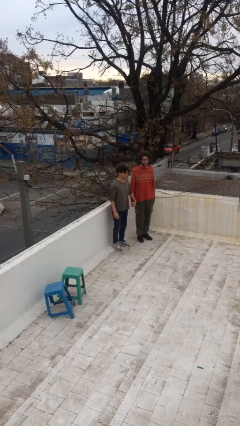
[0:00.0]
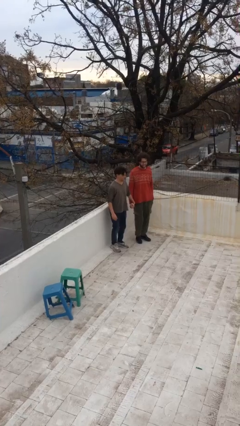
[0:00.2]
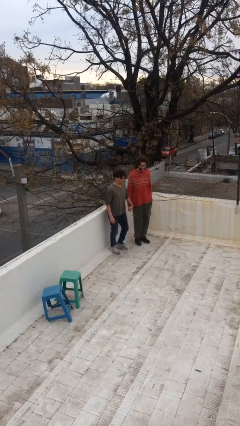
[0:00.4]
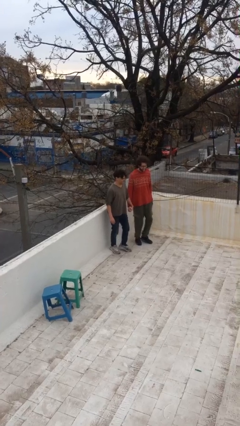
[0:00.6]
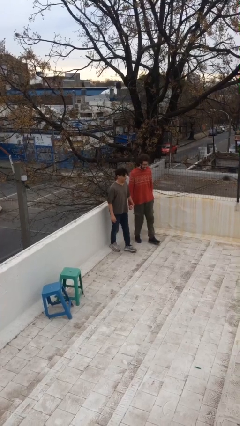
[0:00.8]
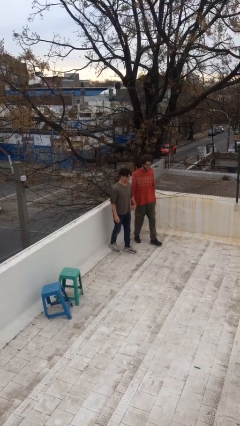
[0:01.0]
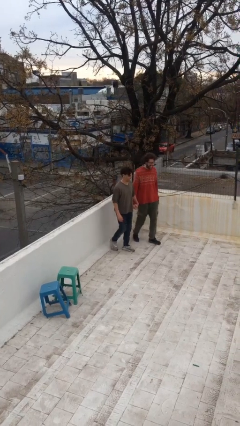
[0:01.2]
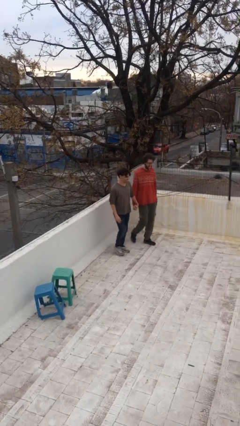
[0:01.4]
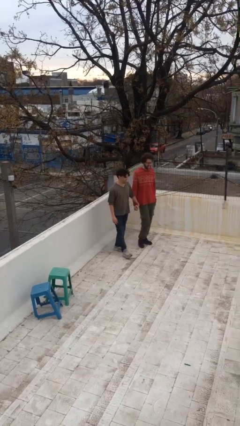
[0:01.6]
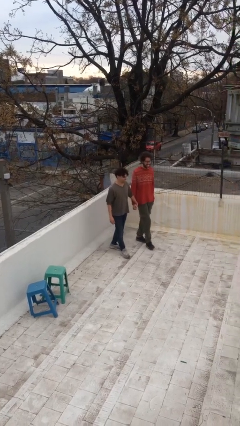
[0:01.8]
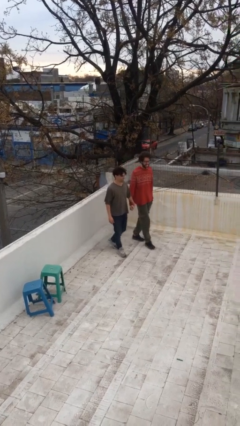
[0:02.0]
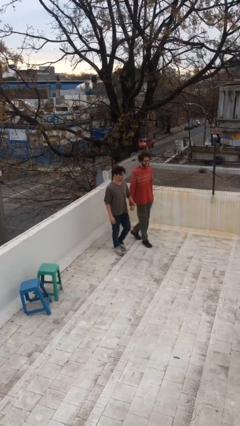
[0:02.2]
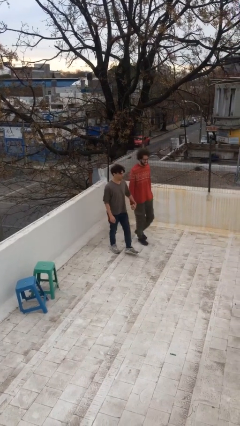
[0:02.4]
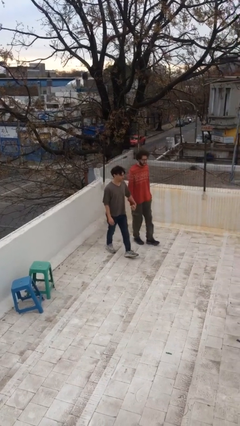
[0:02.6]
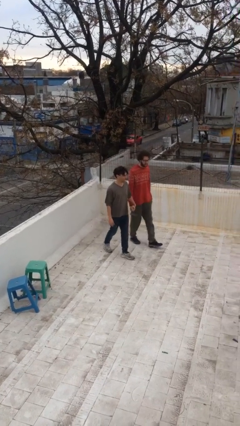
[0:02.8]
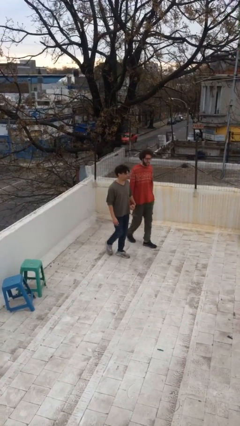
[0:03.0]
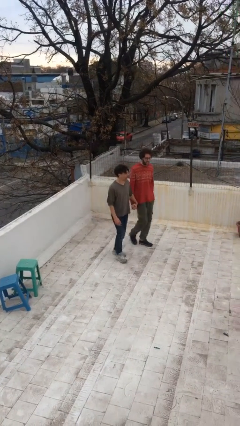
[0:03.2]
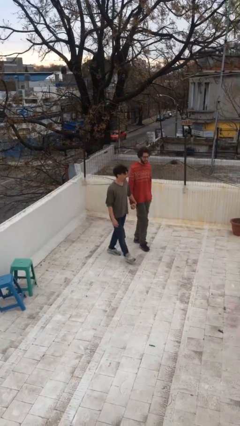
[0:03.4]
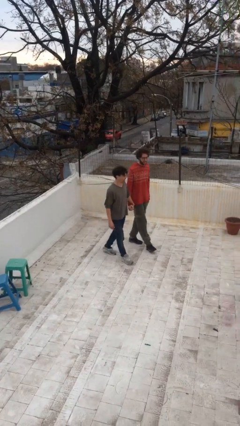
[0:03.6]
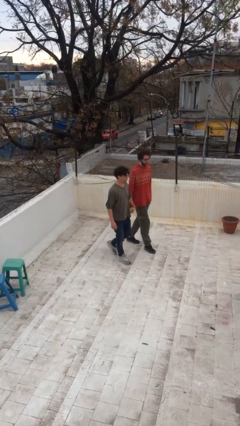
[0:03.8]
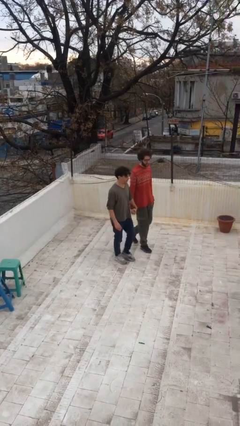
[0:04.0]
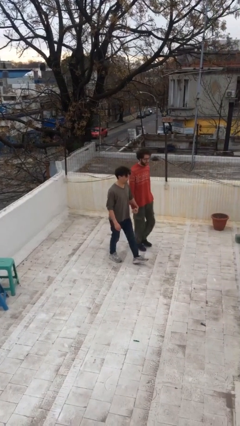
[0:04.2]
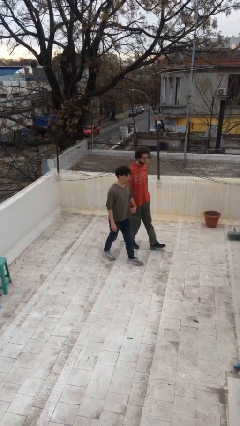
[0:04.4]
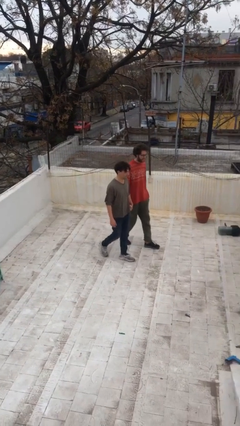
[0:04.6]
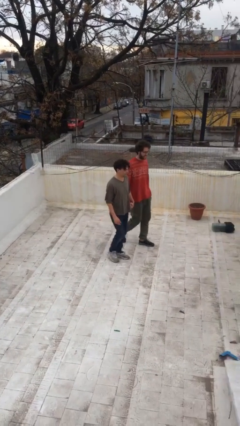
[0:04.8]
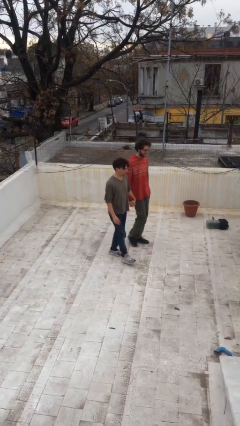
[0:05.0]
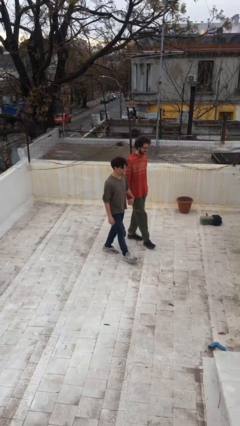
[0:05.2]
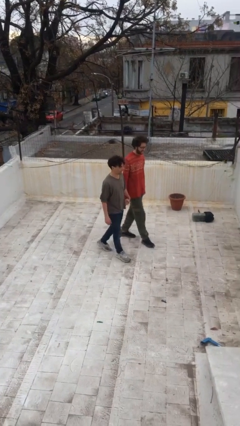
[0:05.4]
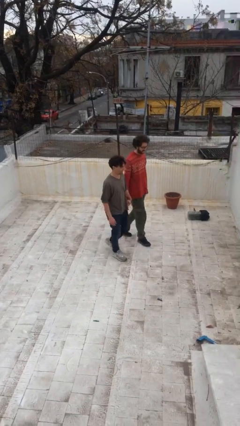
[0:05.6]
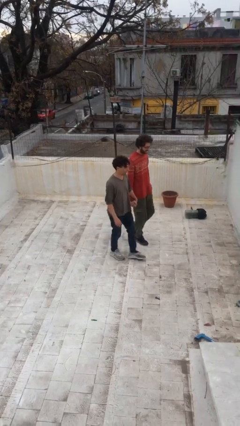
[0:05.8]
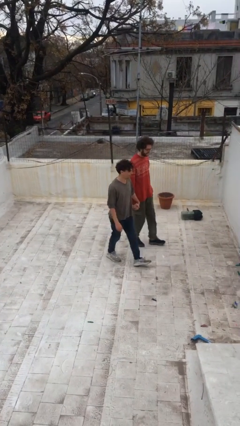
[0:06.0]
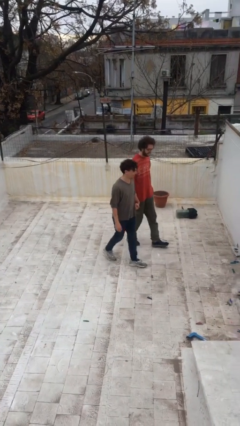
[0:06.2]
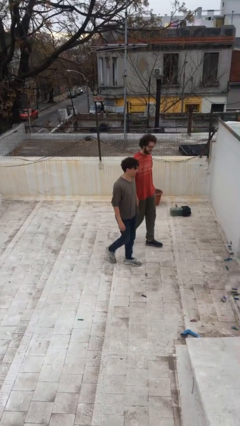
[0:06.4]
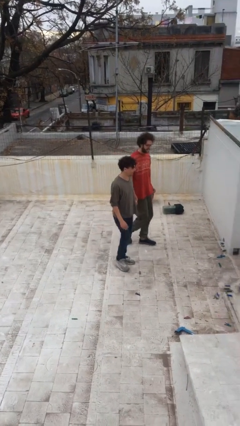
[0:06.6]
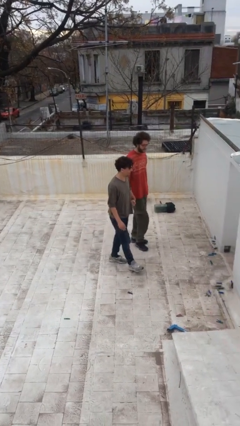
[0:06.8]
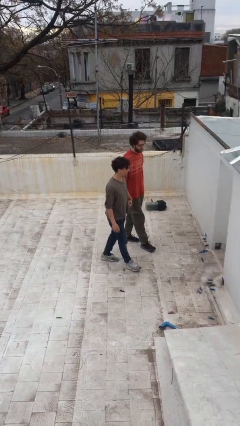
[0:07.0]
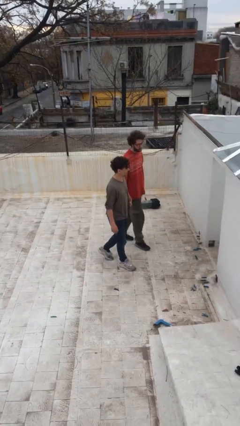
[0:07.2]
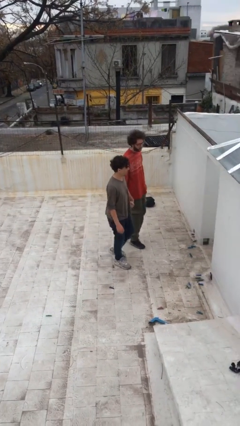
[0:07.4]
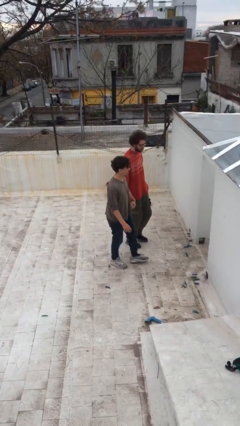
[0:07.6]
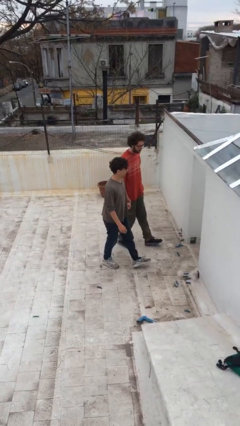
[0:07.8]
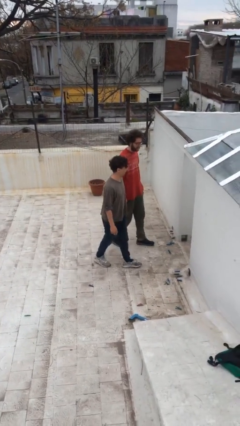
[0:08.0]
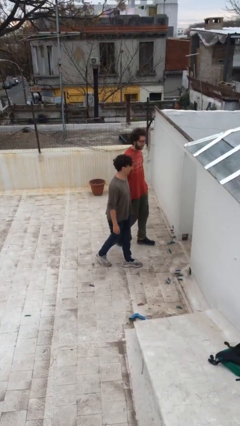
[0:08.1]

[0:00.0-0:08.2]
person holds hand

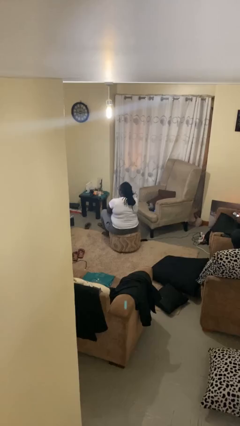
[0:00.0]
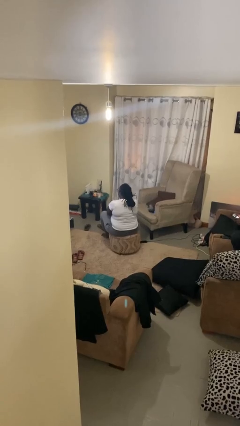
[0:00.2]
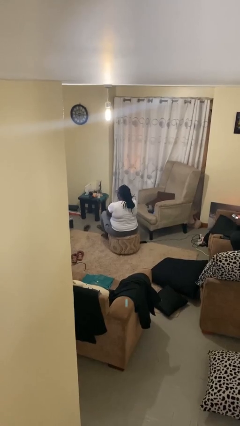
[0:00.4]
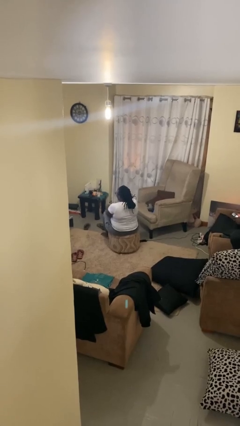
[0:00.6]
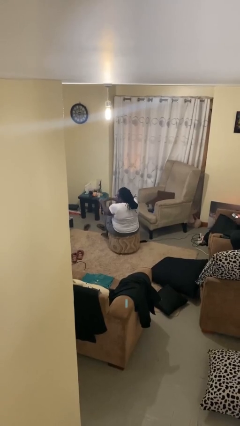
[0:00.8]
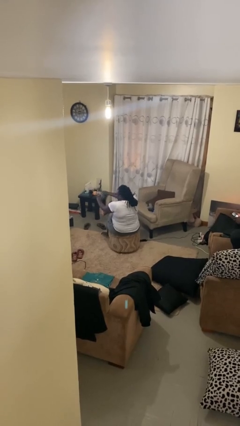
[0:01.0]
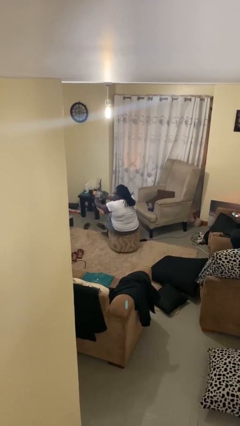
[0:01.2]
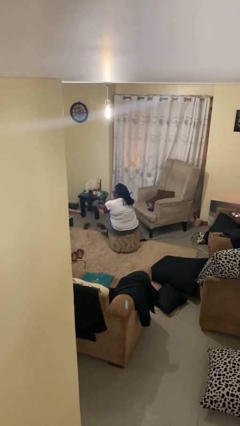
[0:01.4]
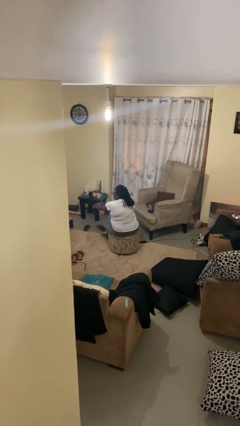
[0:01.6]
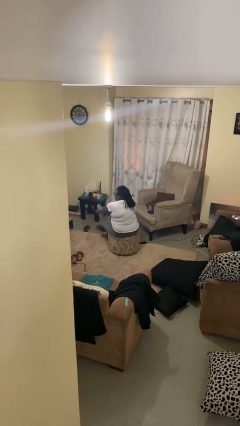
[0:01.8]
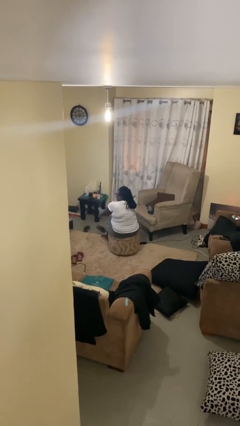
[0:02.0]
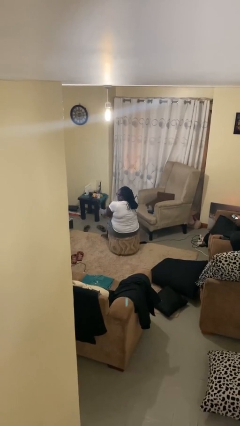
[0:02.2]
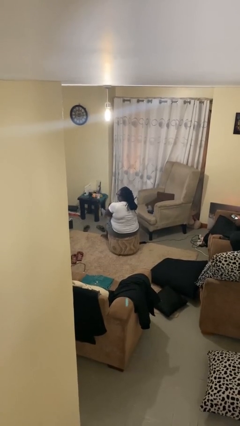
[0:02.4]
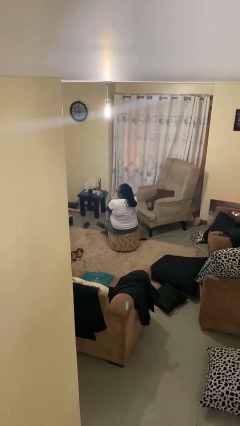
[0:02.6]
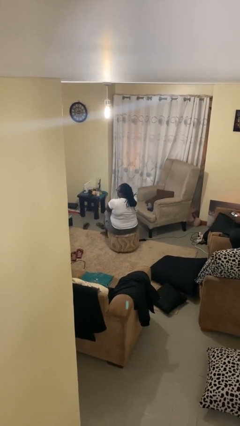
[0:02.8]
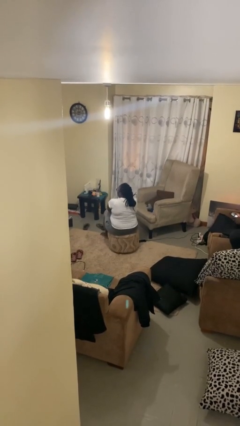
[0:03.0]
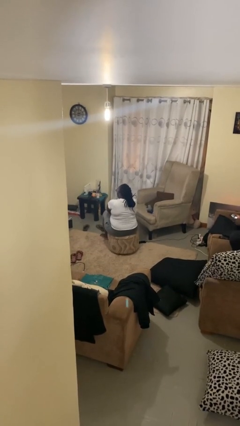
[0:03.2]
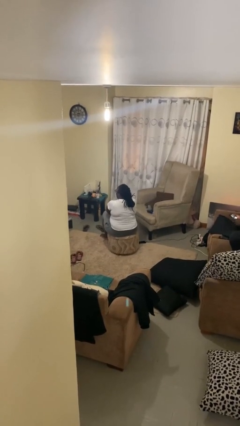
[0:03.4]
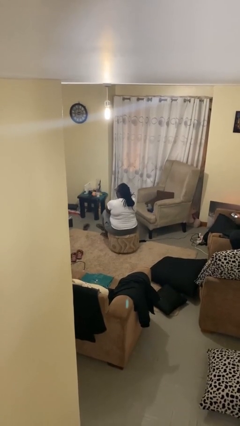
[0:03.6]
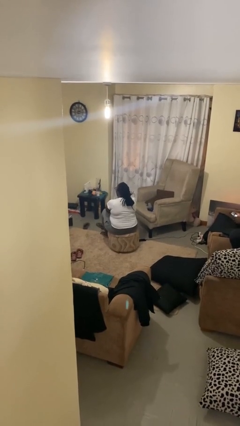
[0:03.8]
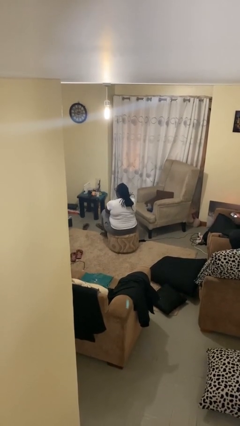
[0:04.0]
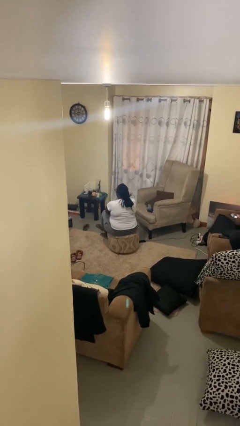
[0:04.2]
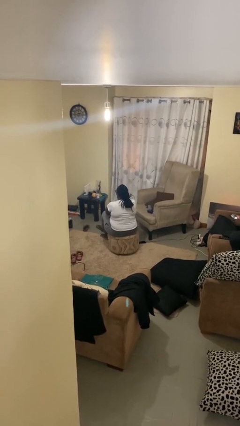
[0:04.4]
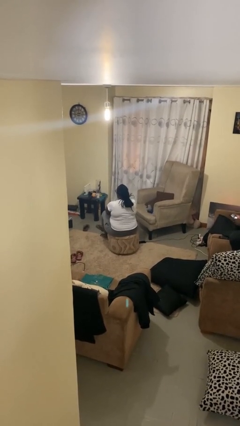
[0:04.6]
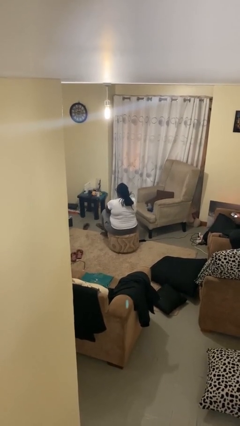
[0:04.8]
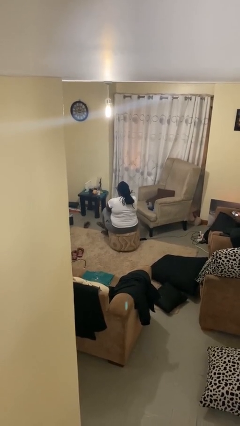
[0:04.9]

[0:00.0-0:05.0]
person puts on socks

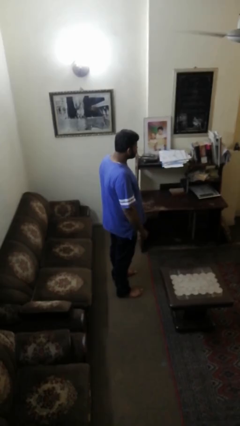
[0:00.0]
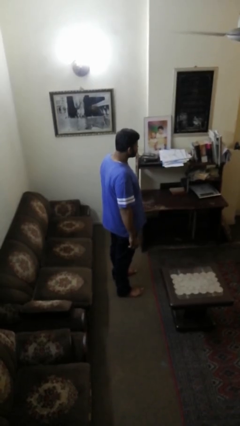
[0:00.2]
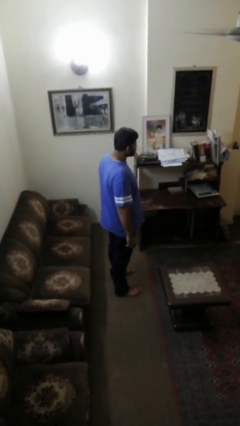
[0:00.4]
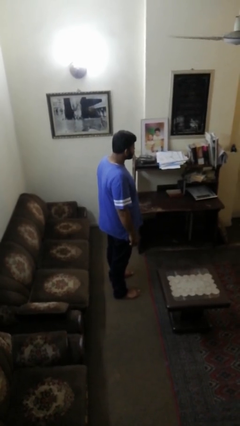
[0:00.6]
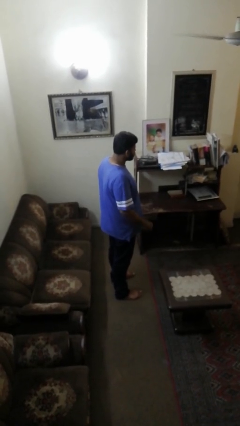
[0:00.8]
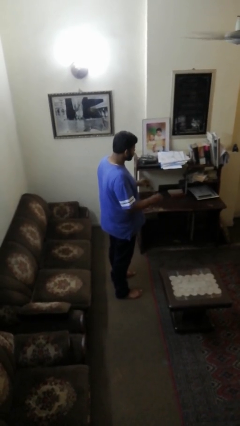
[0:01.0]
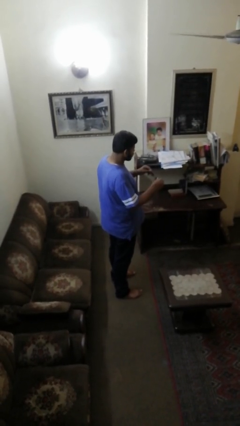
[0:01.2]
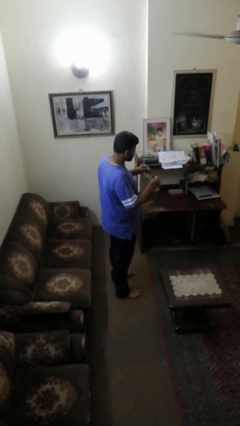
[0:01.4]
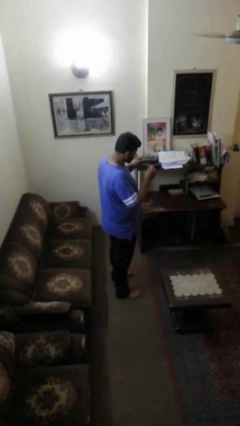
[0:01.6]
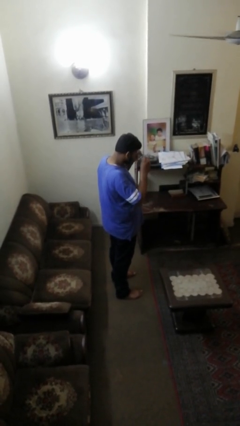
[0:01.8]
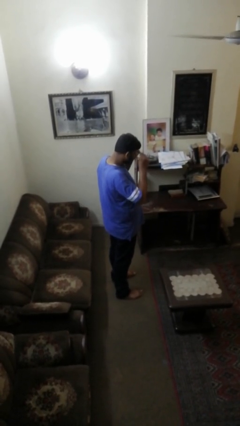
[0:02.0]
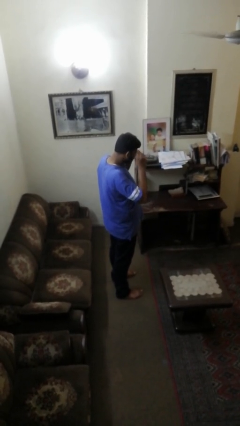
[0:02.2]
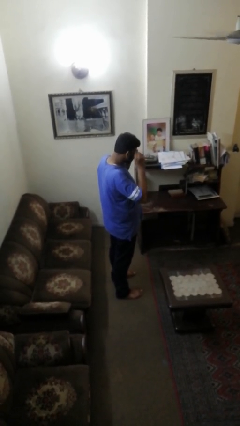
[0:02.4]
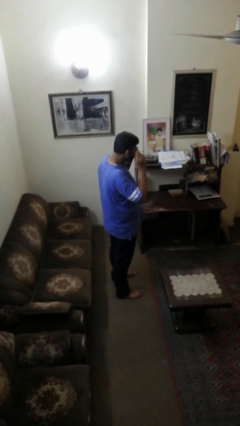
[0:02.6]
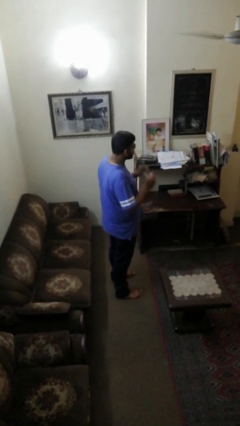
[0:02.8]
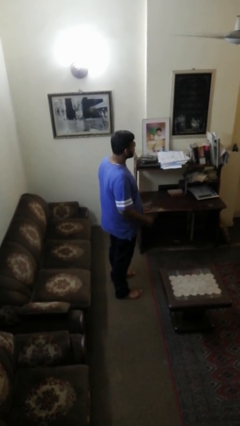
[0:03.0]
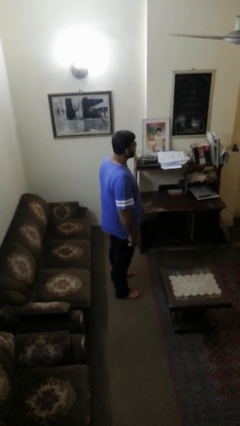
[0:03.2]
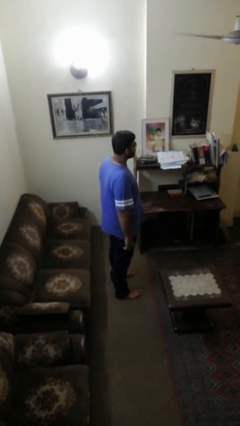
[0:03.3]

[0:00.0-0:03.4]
person puts on sunglasses

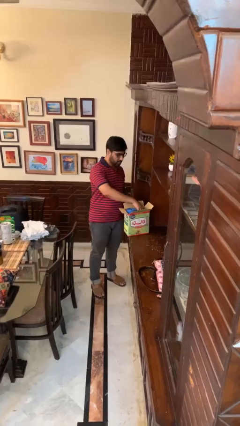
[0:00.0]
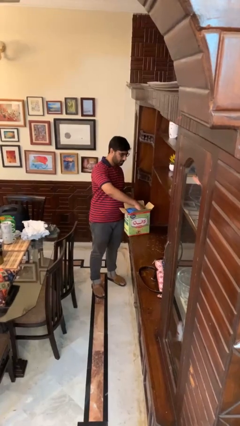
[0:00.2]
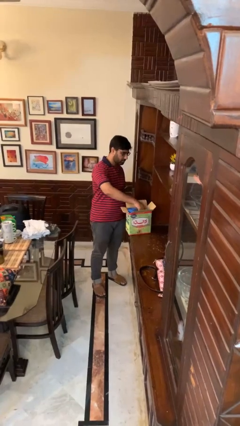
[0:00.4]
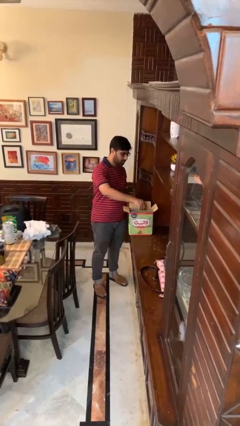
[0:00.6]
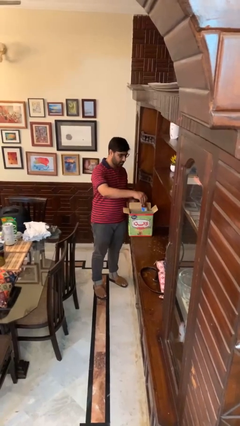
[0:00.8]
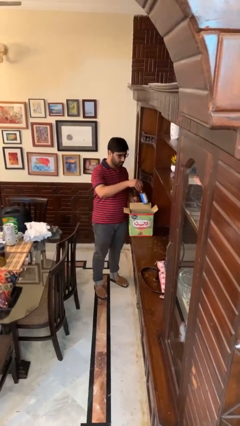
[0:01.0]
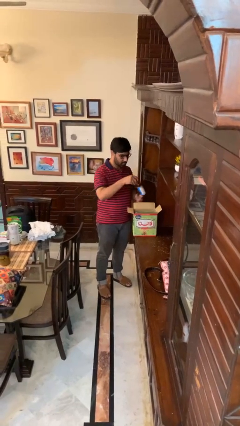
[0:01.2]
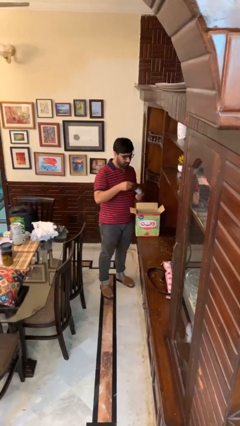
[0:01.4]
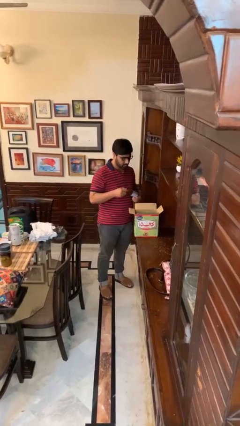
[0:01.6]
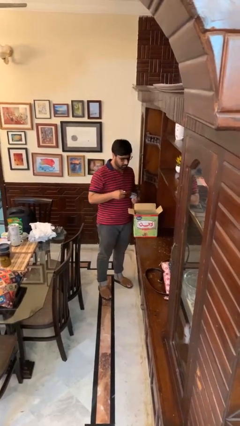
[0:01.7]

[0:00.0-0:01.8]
person takes object from box
